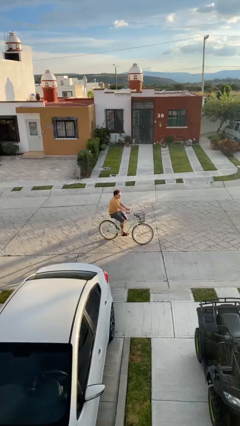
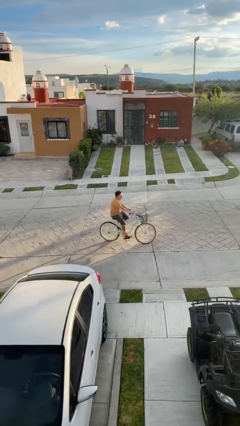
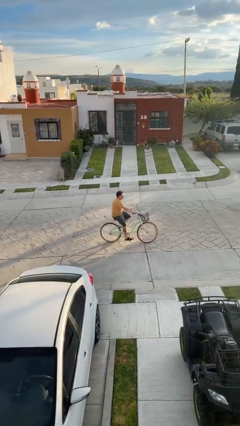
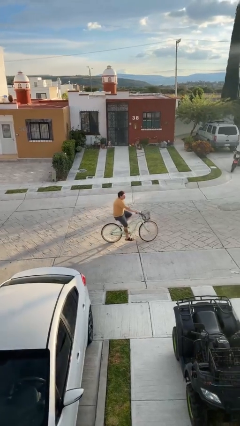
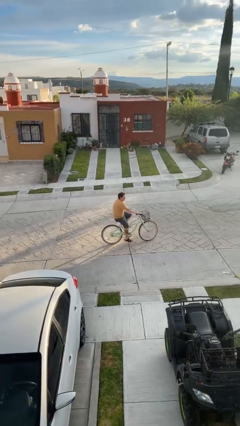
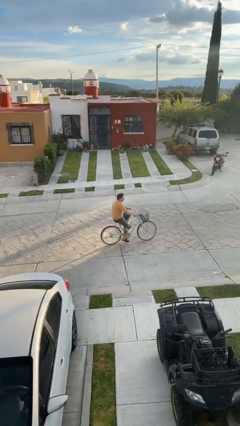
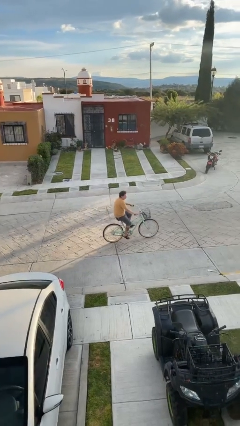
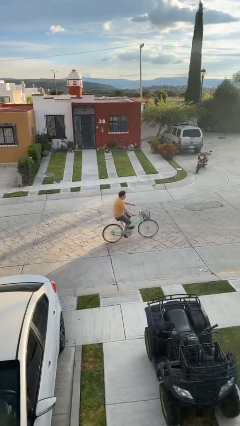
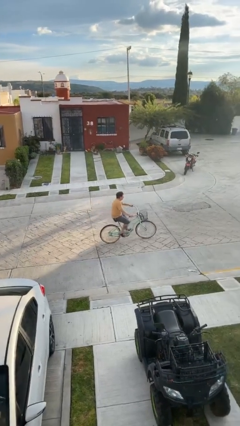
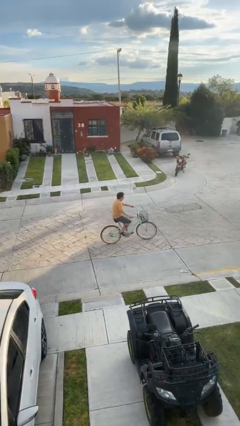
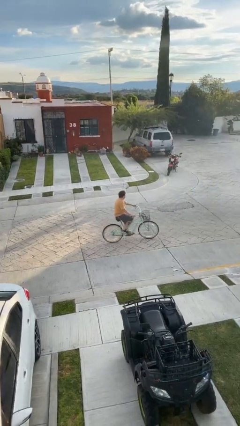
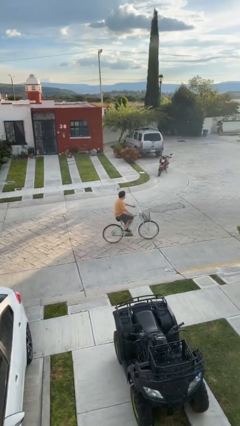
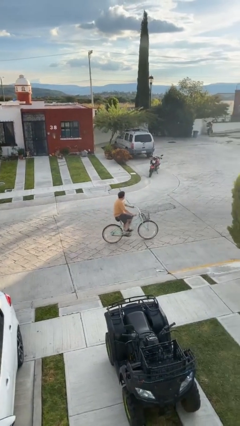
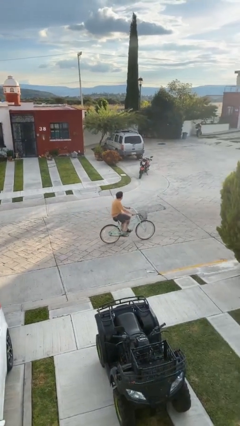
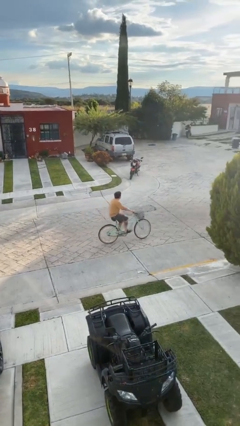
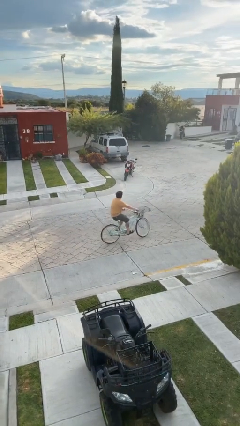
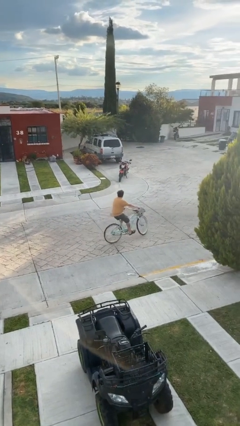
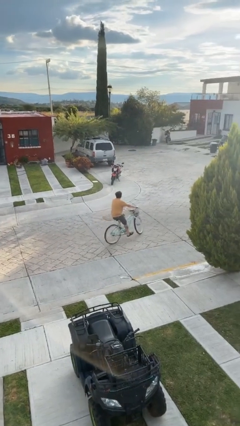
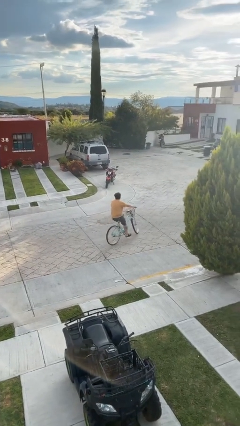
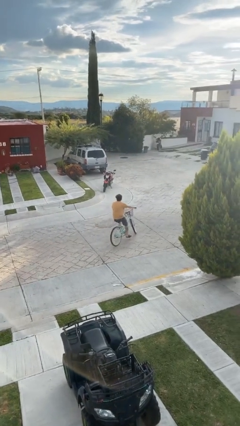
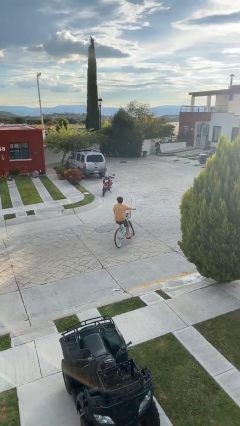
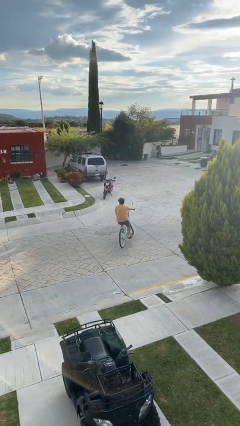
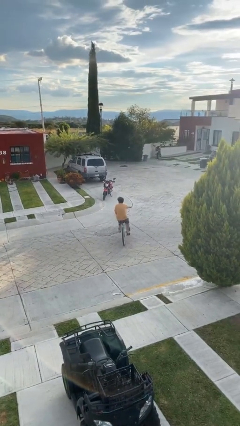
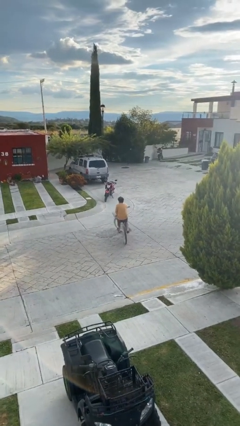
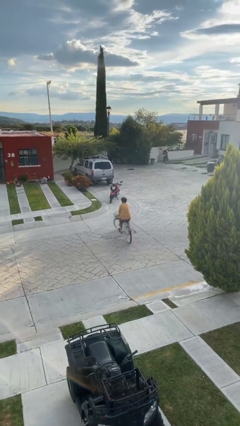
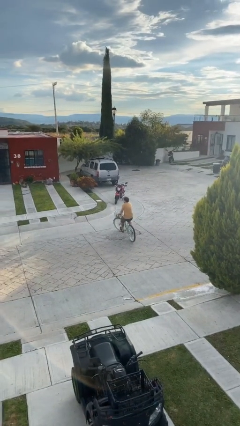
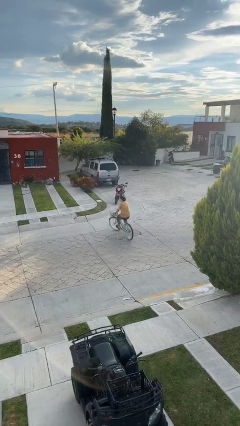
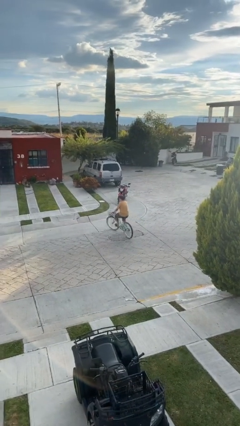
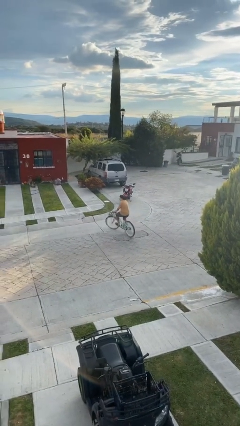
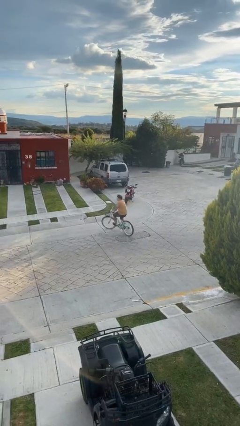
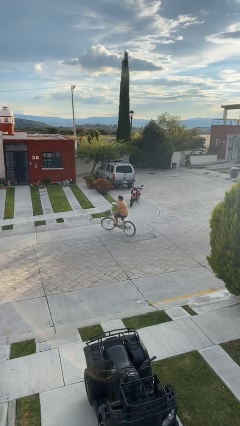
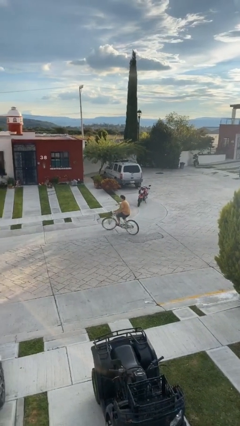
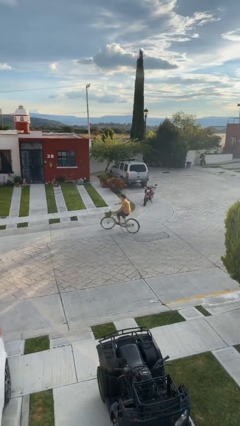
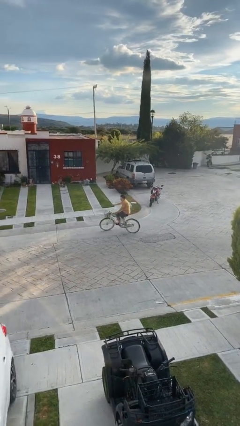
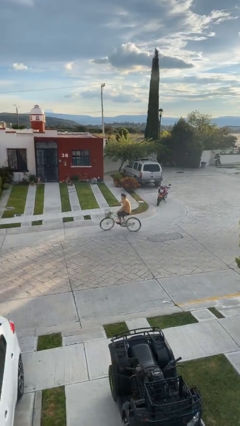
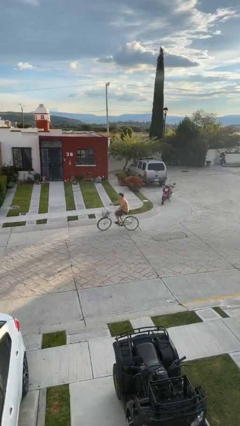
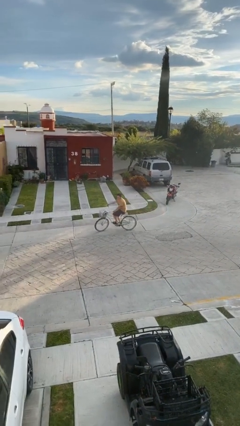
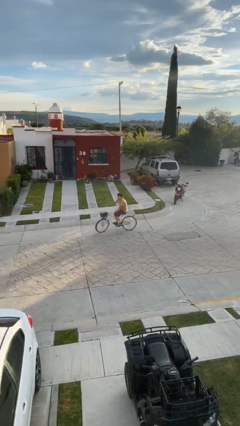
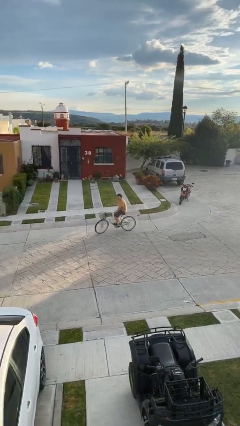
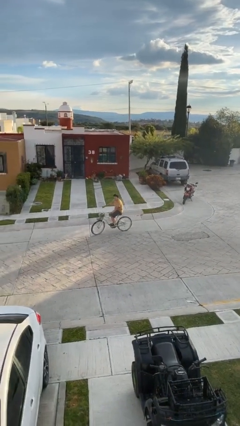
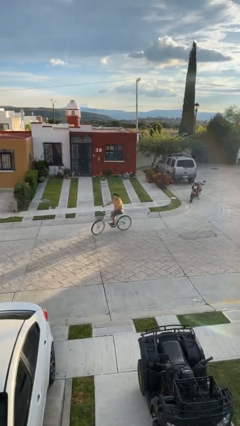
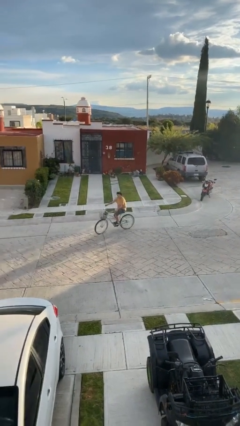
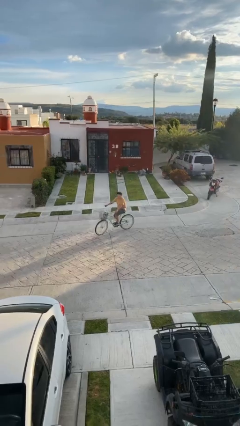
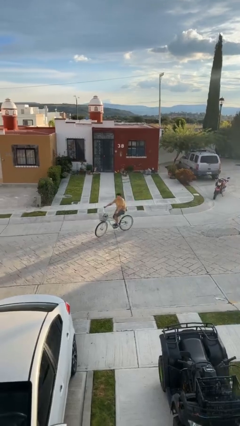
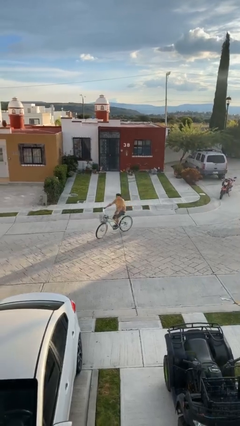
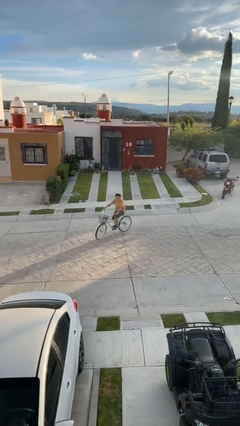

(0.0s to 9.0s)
person rides bicycle

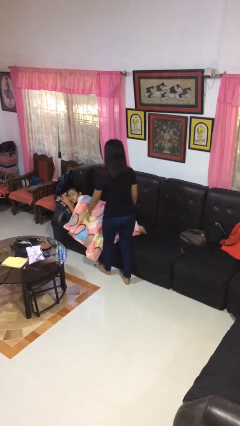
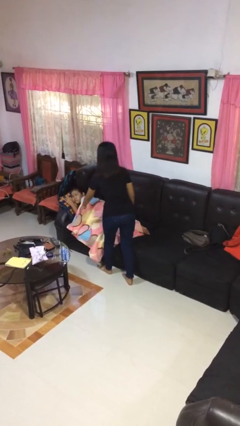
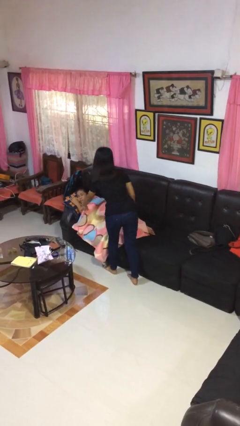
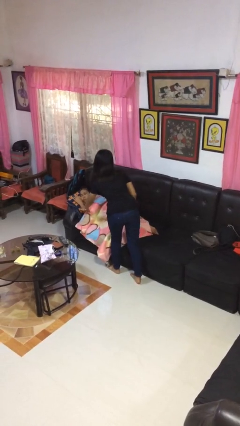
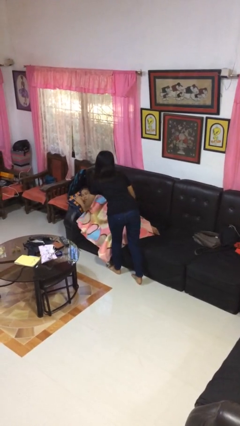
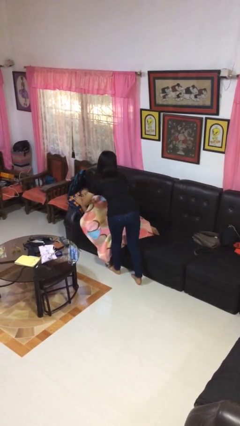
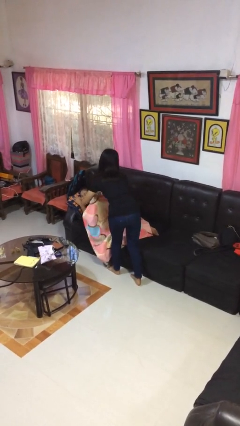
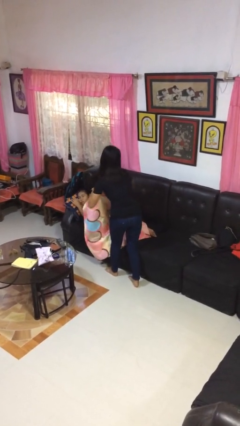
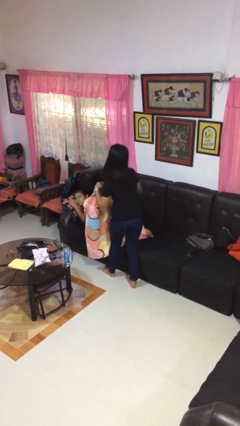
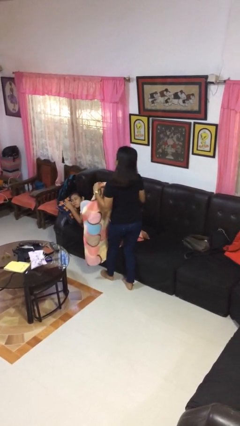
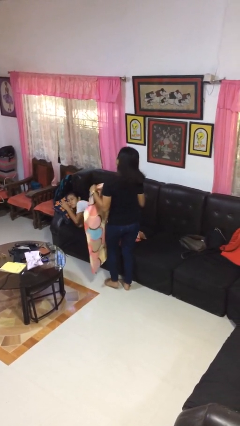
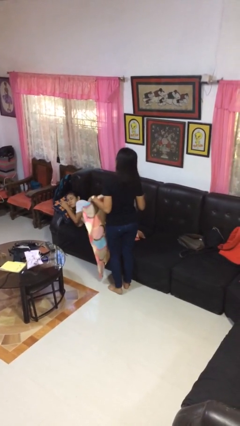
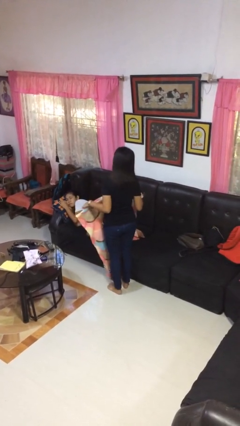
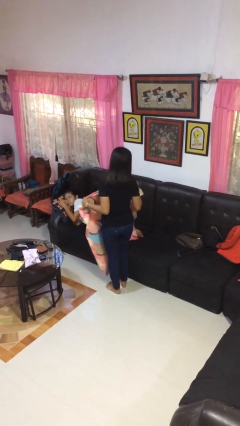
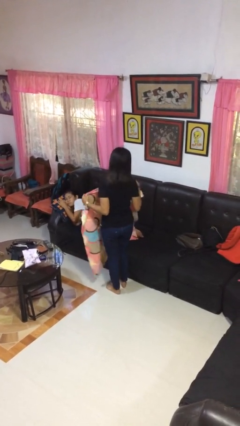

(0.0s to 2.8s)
person uncovers friend with blanket

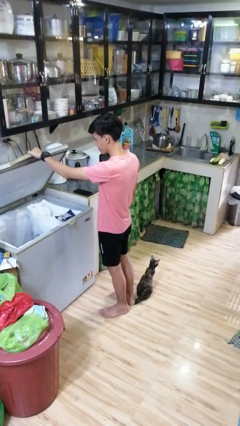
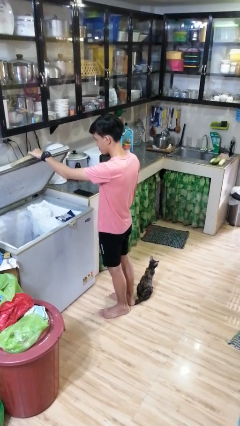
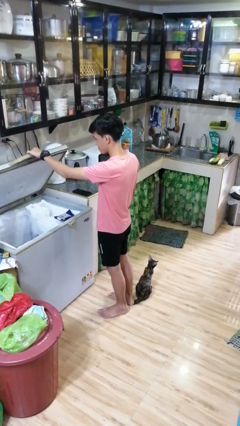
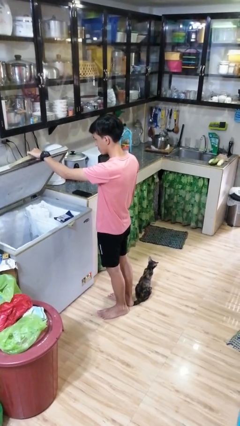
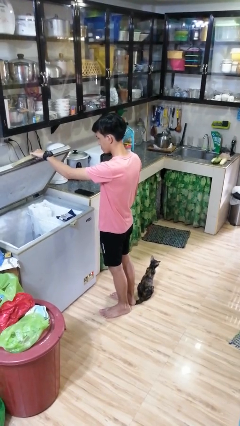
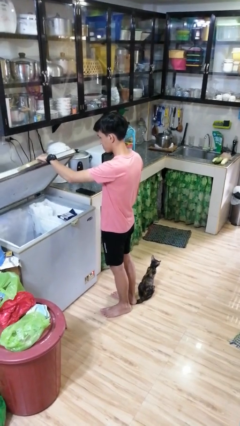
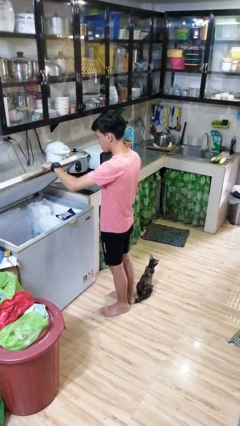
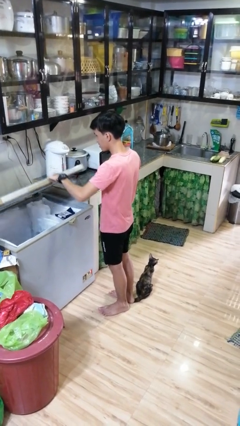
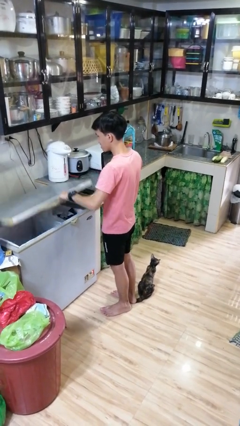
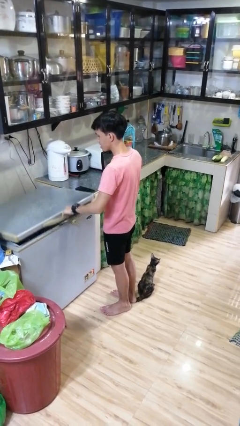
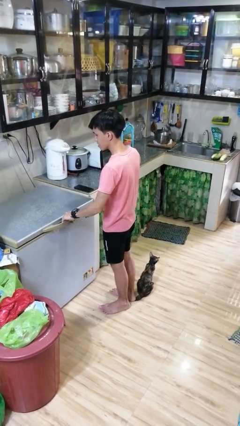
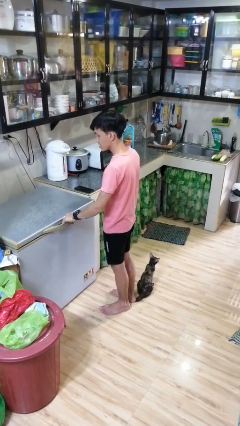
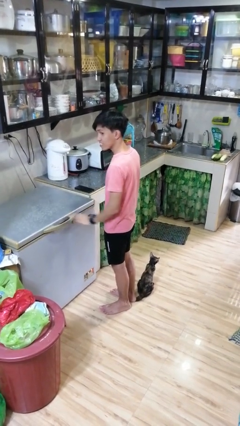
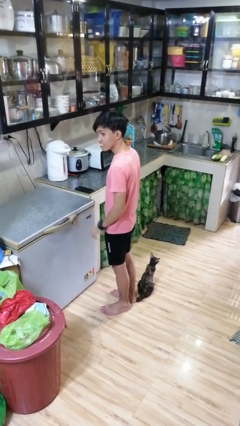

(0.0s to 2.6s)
person closes refrigerator

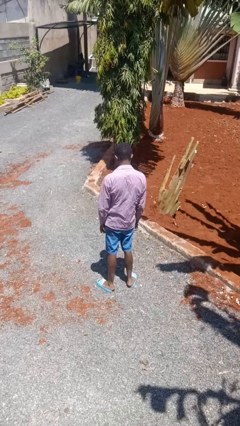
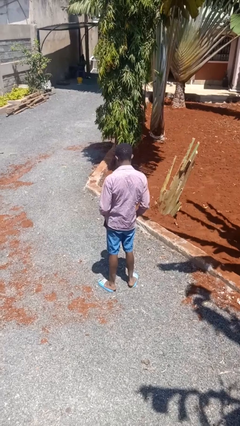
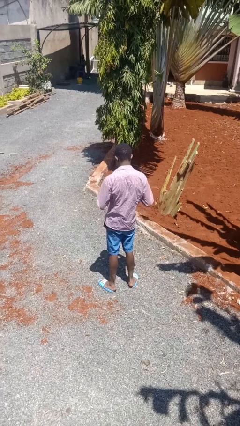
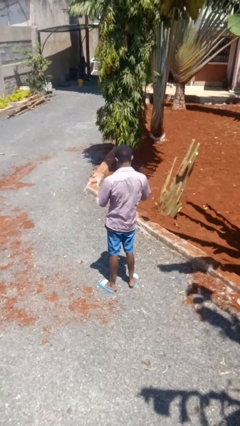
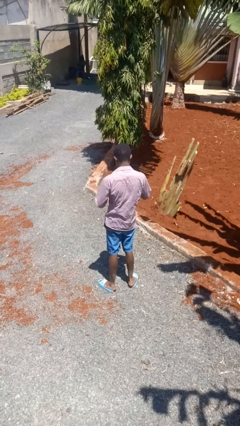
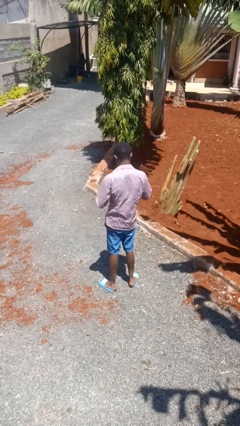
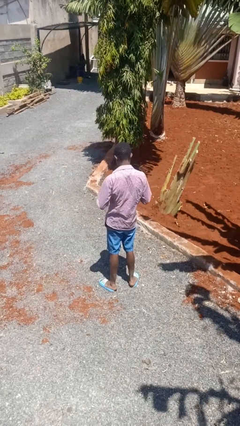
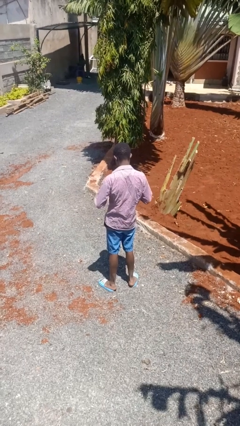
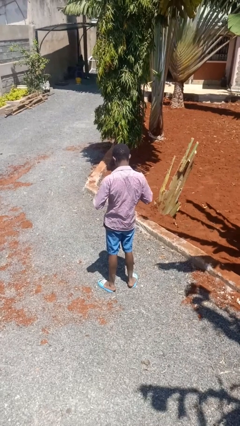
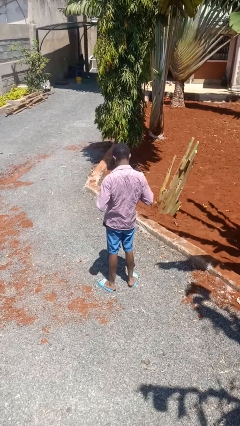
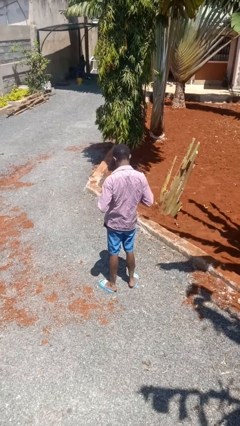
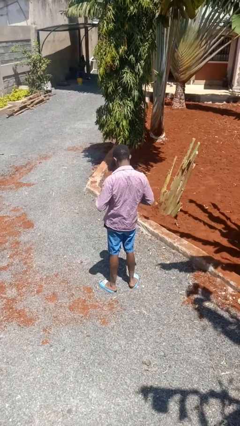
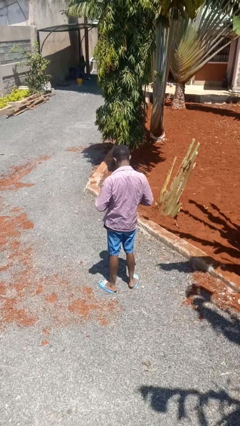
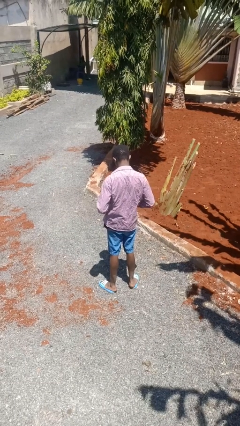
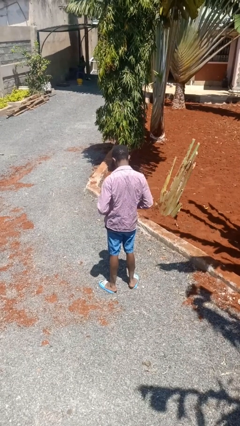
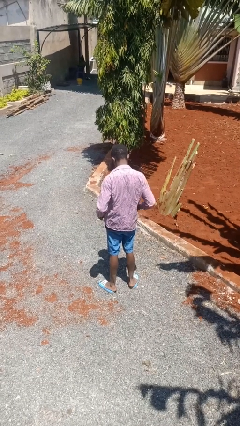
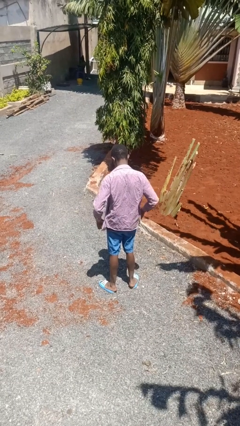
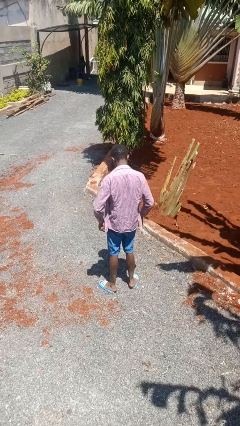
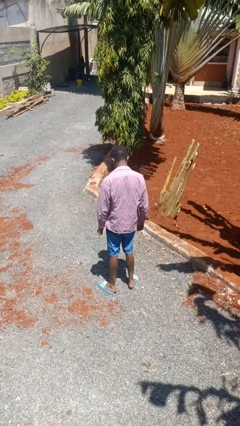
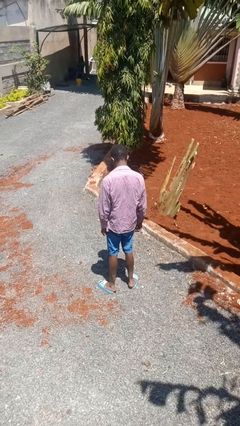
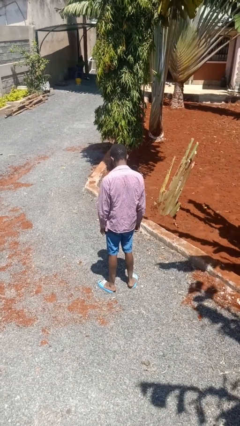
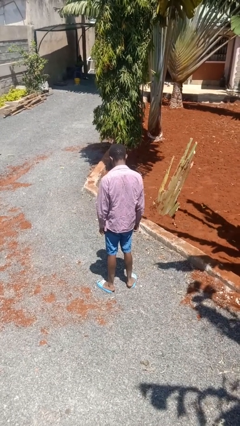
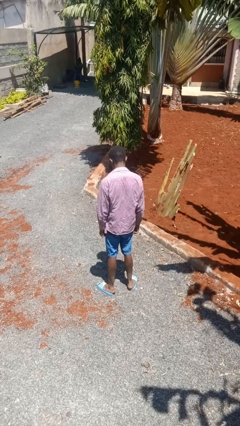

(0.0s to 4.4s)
person unbuttons shirt
